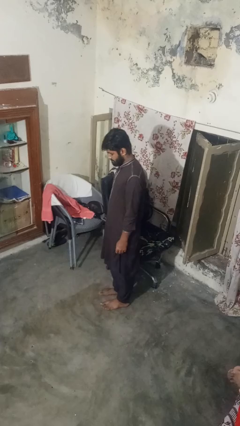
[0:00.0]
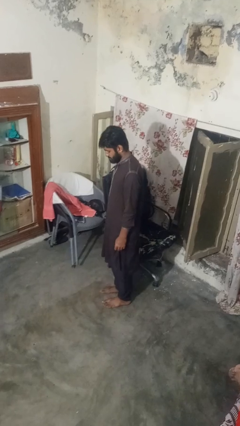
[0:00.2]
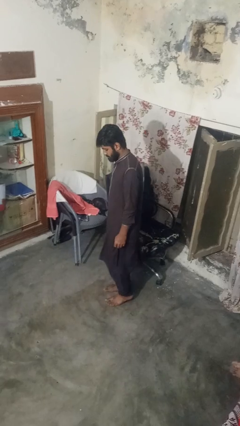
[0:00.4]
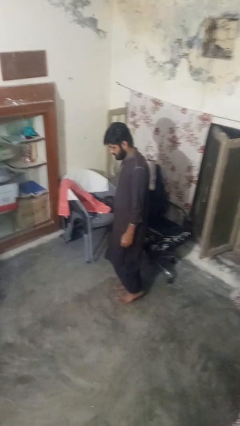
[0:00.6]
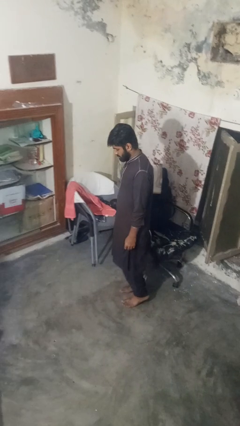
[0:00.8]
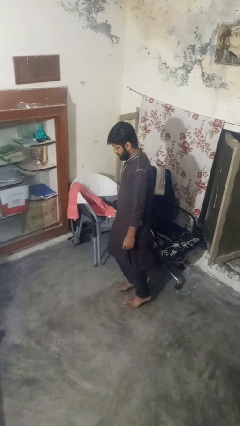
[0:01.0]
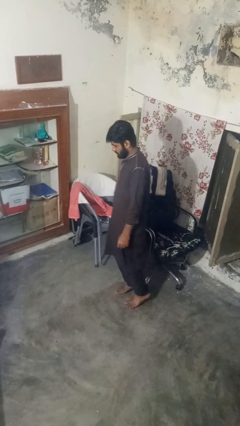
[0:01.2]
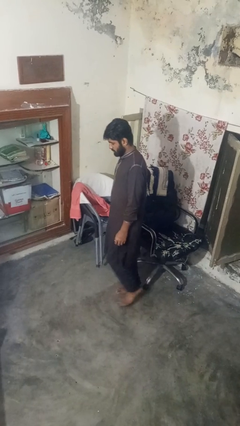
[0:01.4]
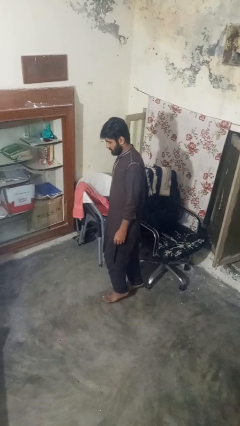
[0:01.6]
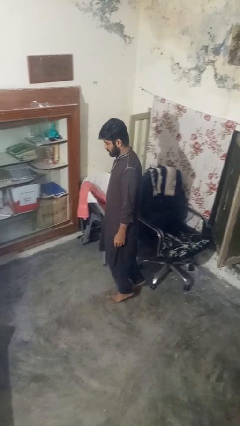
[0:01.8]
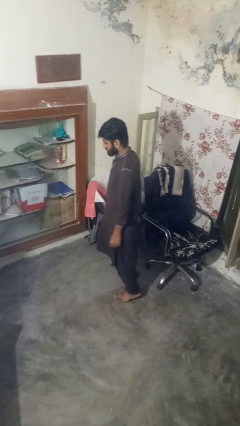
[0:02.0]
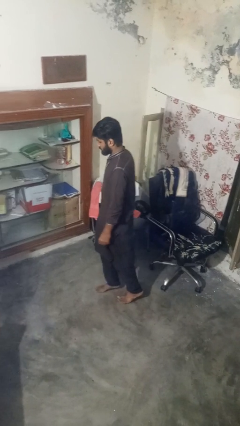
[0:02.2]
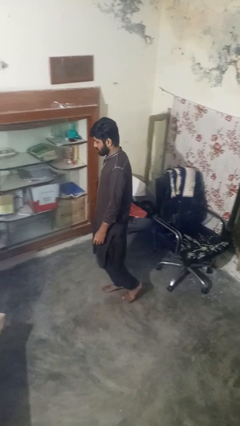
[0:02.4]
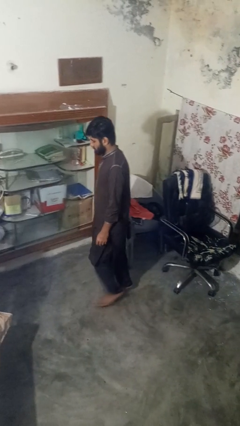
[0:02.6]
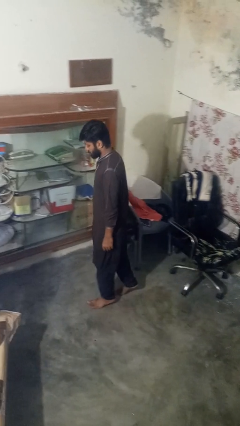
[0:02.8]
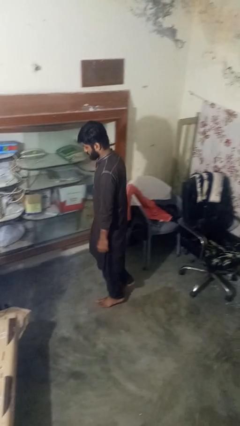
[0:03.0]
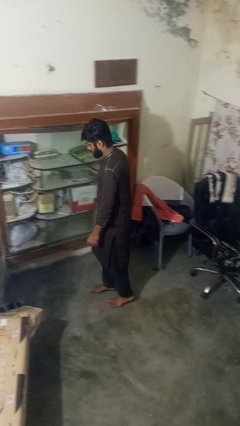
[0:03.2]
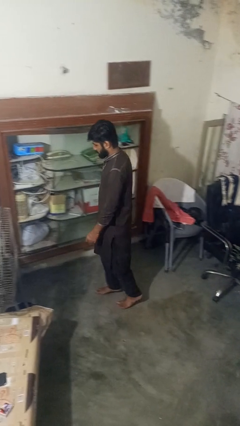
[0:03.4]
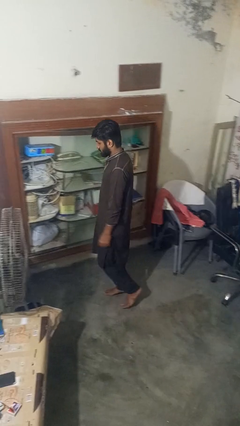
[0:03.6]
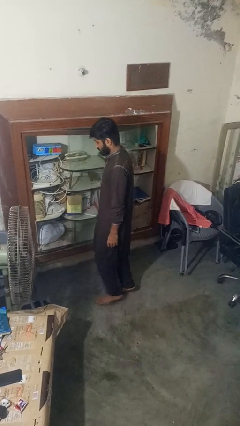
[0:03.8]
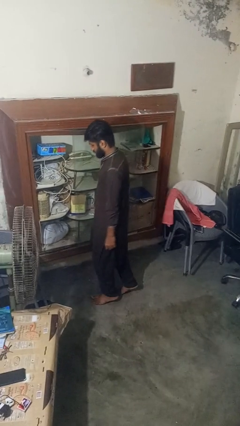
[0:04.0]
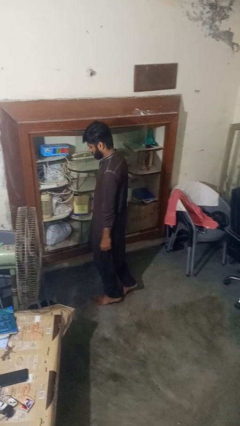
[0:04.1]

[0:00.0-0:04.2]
person walks tiptoe

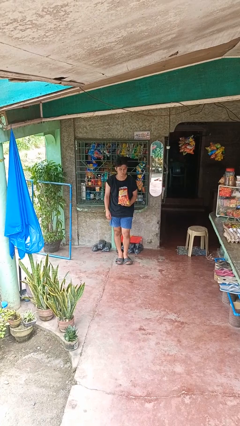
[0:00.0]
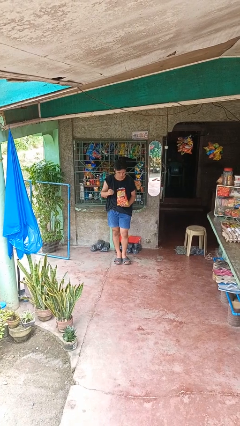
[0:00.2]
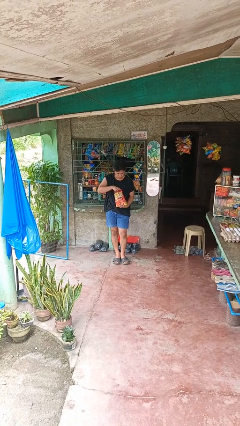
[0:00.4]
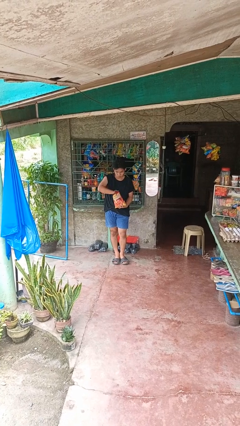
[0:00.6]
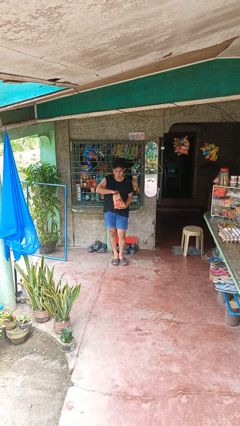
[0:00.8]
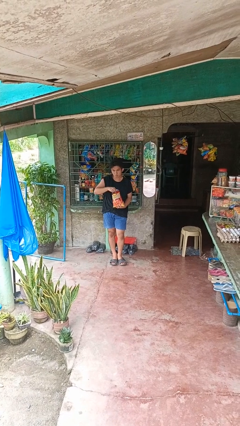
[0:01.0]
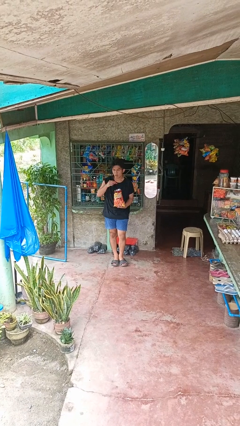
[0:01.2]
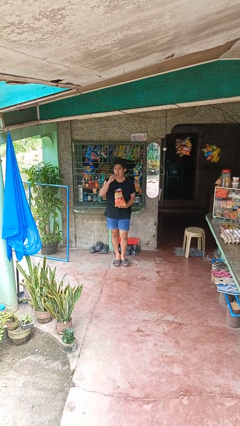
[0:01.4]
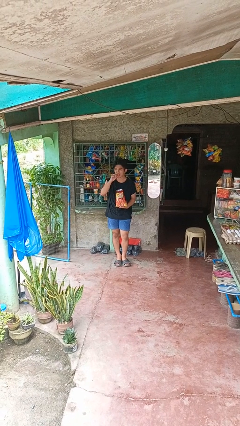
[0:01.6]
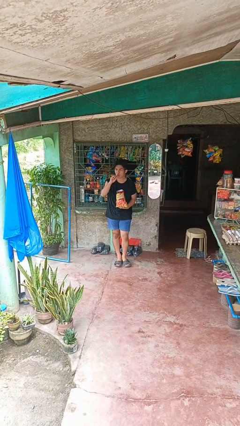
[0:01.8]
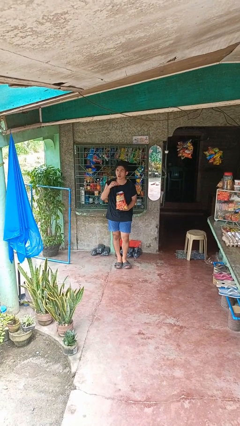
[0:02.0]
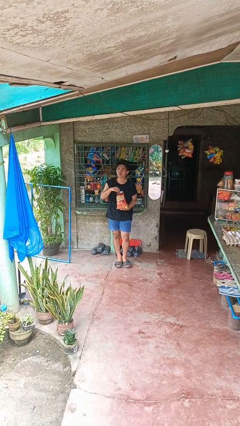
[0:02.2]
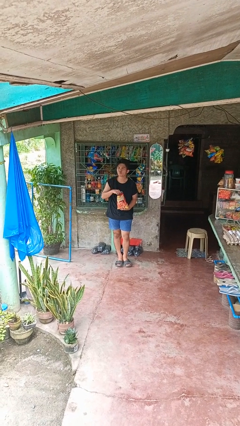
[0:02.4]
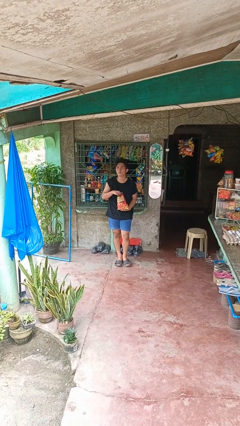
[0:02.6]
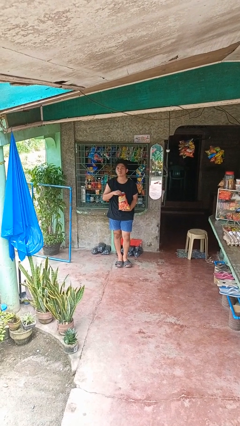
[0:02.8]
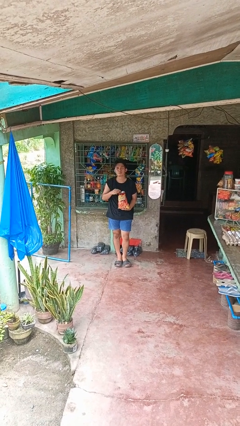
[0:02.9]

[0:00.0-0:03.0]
person eats snack from bag

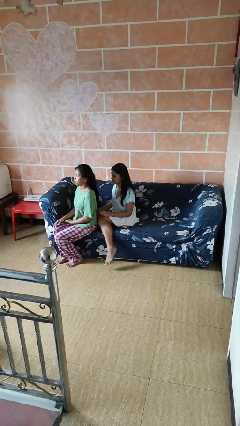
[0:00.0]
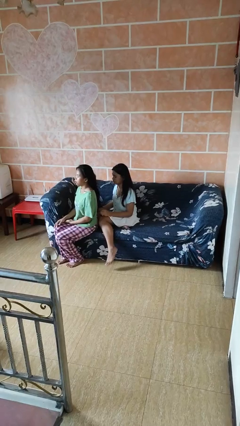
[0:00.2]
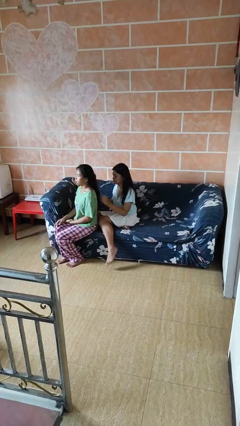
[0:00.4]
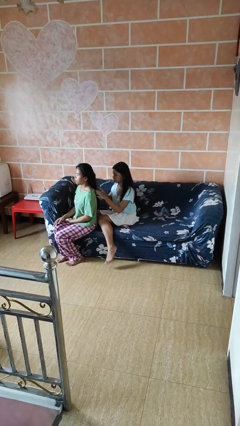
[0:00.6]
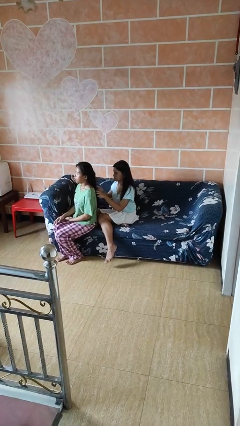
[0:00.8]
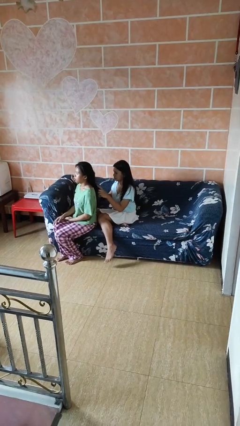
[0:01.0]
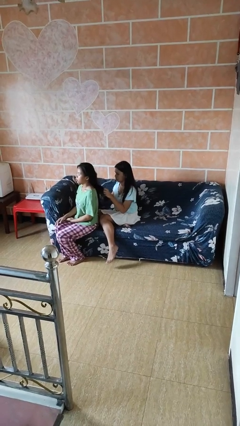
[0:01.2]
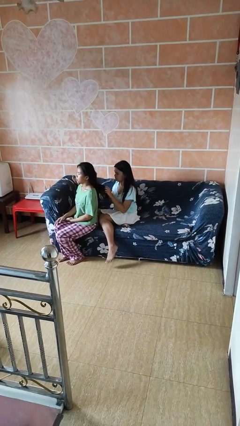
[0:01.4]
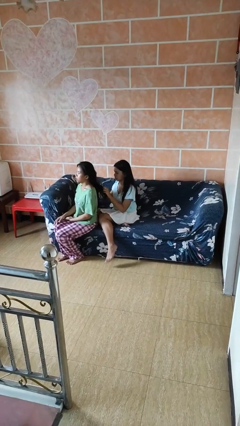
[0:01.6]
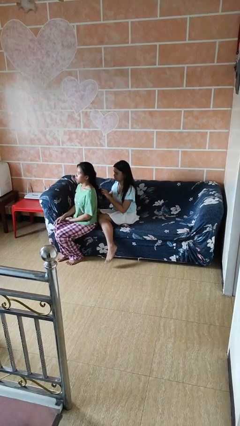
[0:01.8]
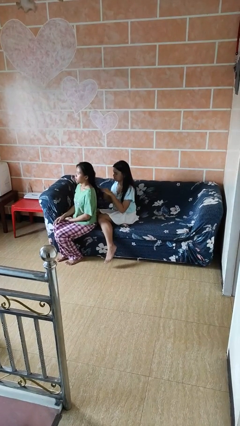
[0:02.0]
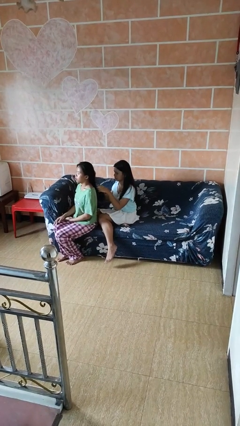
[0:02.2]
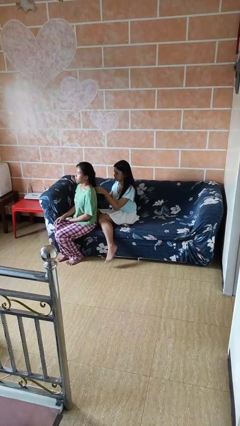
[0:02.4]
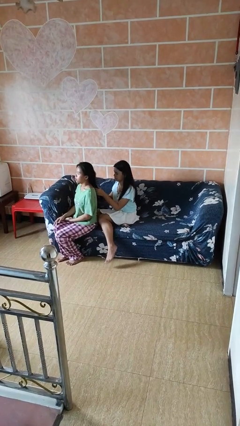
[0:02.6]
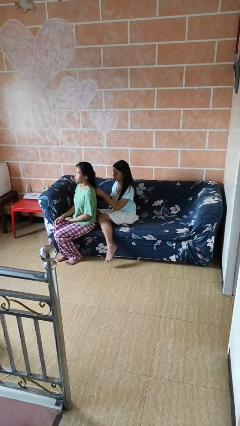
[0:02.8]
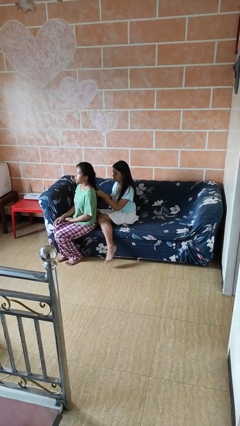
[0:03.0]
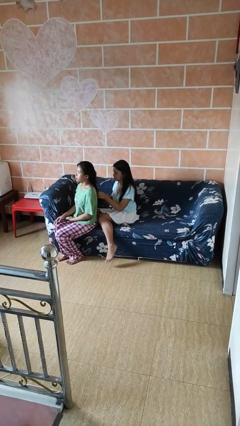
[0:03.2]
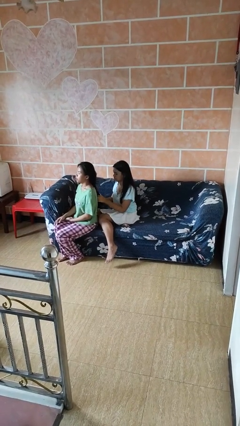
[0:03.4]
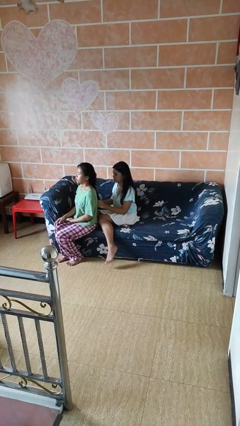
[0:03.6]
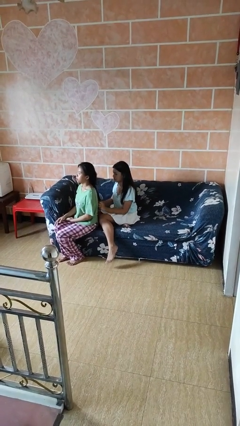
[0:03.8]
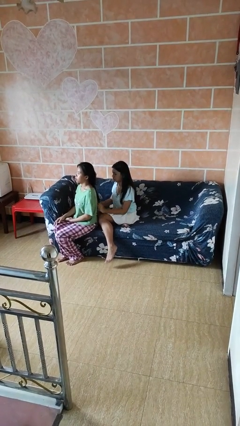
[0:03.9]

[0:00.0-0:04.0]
person braids hair of person

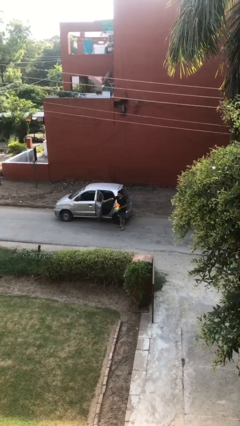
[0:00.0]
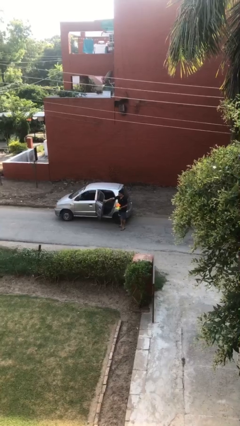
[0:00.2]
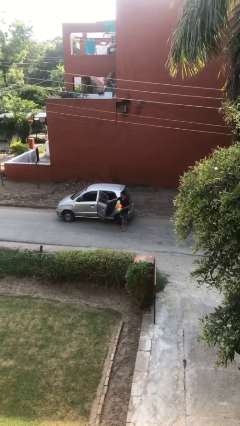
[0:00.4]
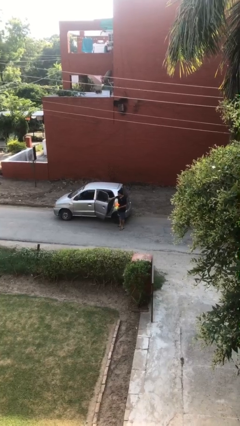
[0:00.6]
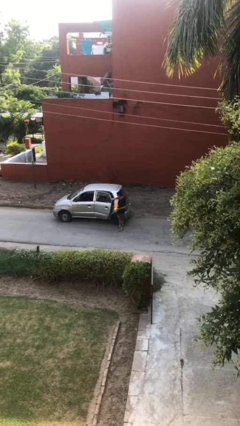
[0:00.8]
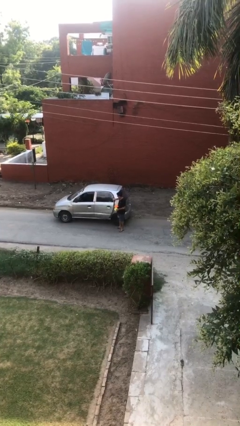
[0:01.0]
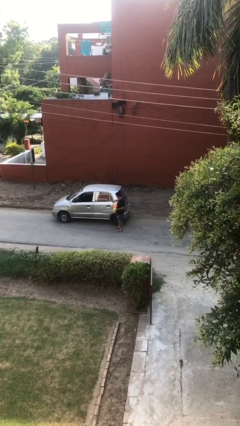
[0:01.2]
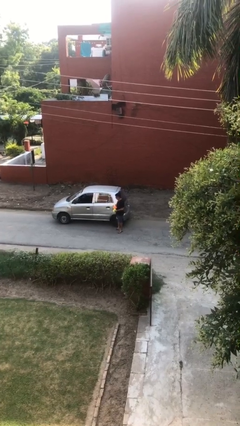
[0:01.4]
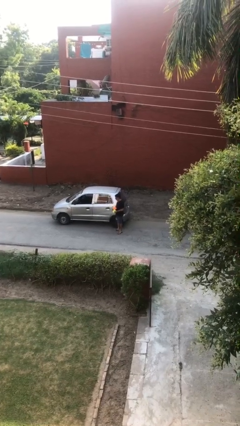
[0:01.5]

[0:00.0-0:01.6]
person closes car door

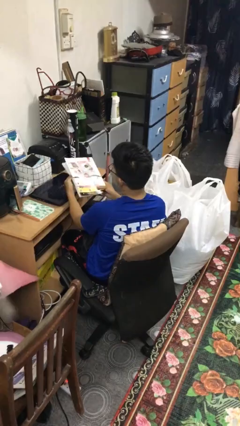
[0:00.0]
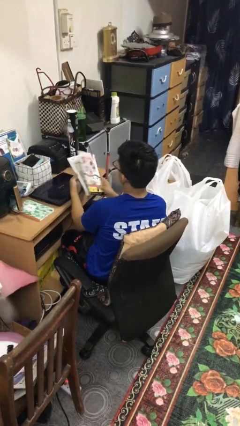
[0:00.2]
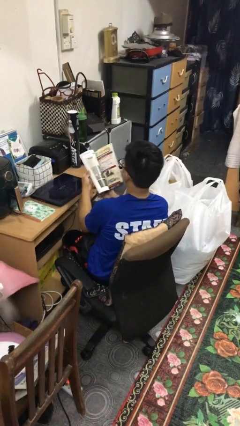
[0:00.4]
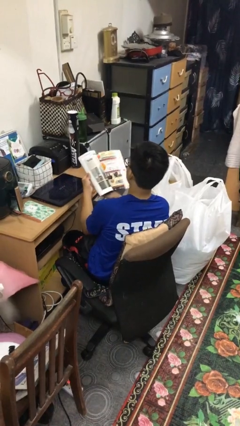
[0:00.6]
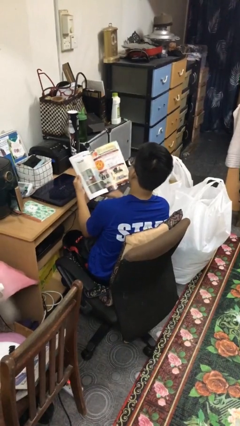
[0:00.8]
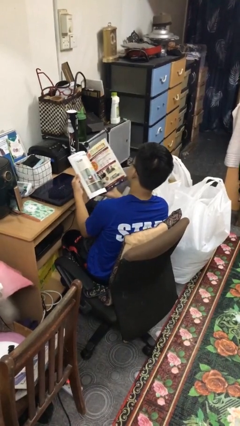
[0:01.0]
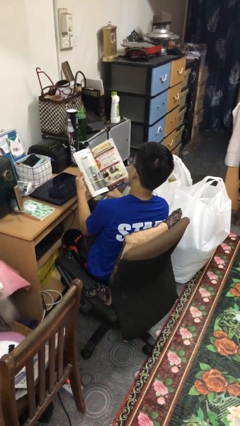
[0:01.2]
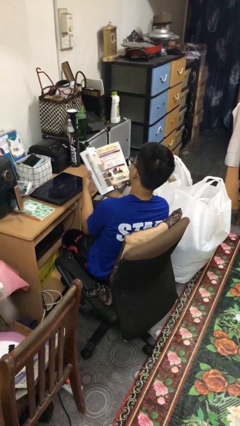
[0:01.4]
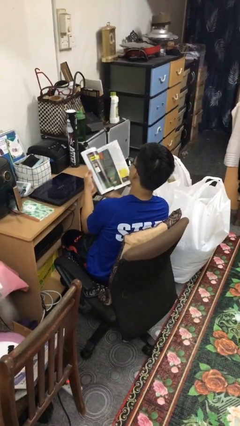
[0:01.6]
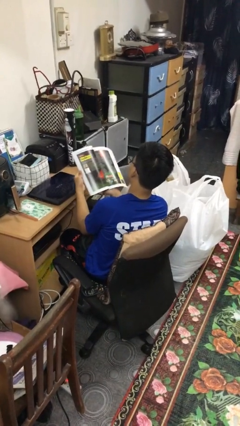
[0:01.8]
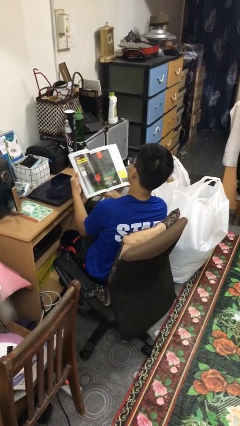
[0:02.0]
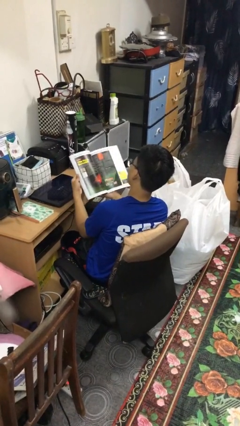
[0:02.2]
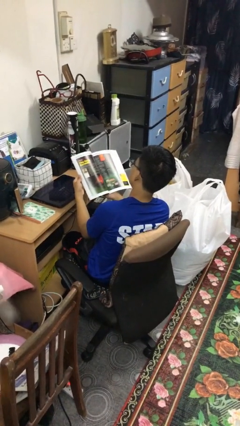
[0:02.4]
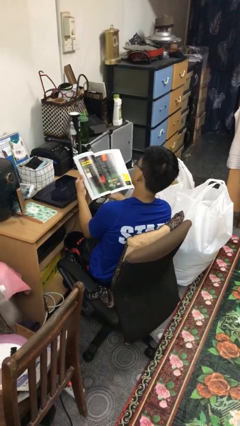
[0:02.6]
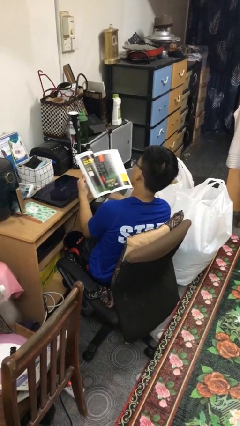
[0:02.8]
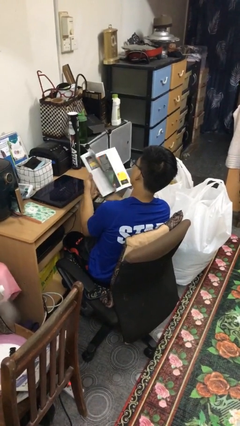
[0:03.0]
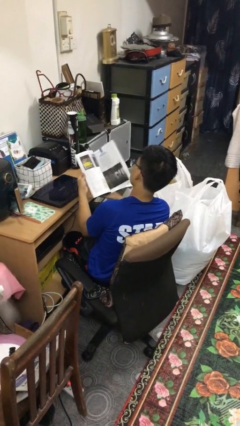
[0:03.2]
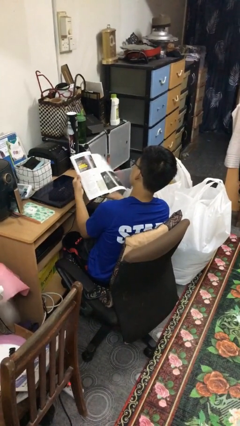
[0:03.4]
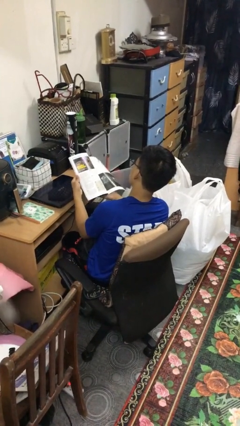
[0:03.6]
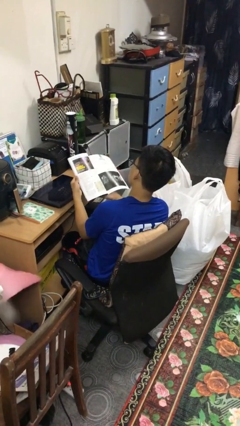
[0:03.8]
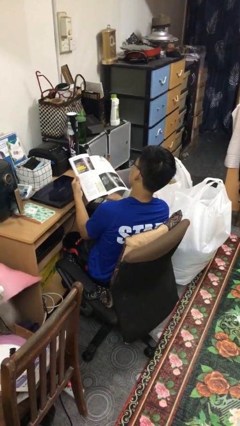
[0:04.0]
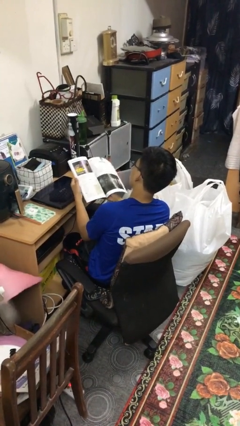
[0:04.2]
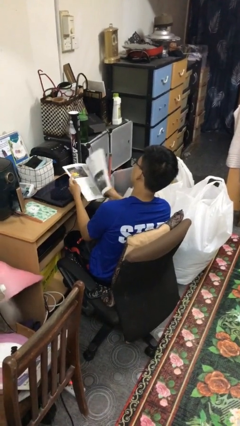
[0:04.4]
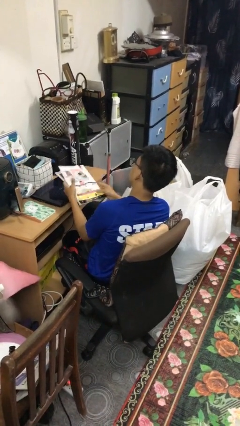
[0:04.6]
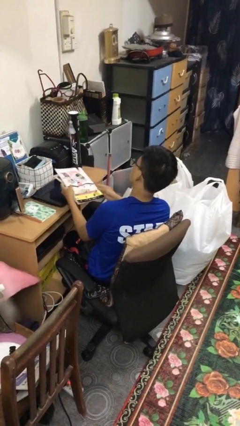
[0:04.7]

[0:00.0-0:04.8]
person reads magazine
